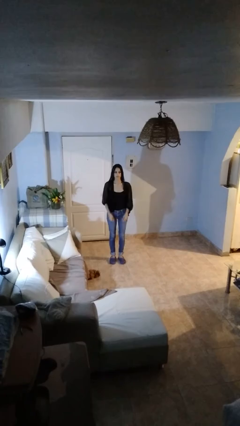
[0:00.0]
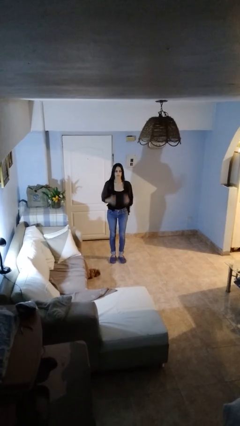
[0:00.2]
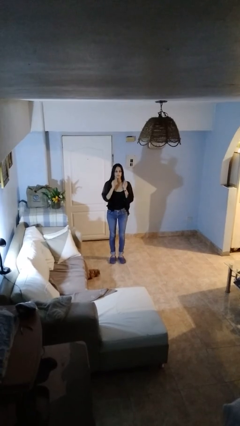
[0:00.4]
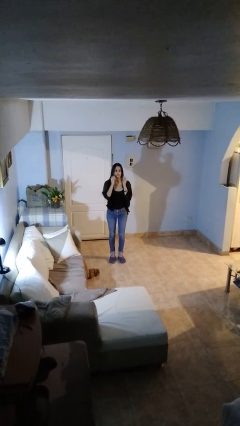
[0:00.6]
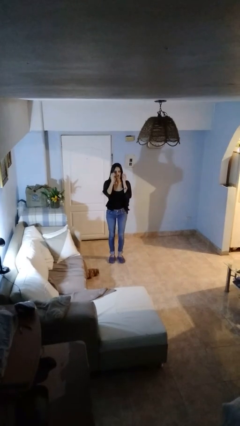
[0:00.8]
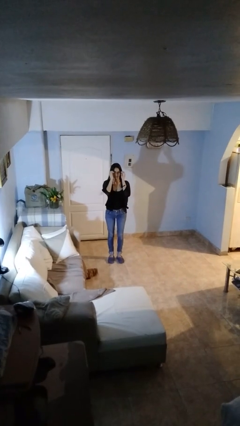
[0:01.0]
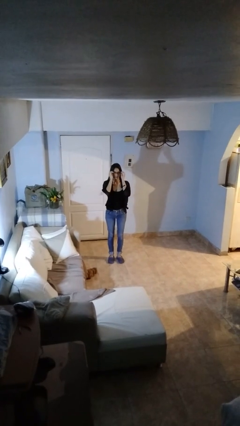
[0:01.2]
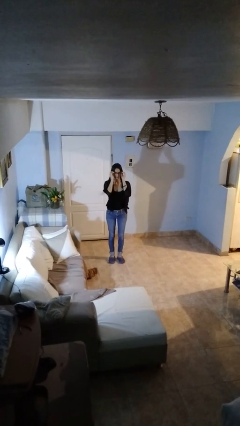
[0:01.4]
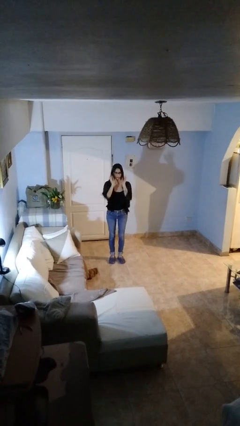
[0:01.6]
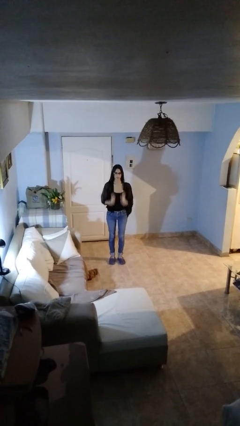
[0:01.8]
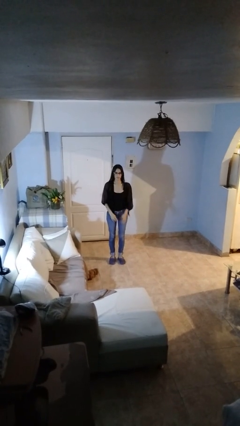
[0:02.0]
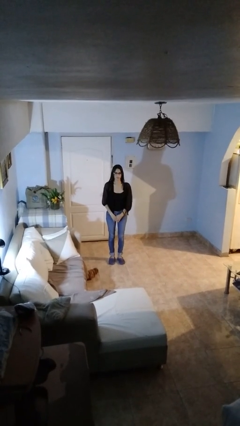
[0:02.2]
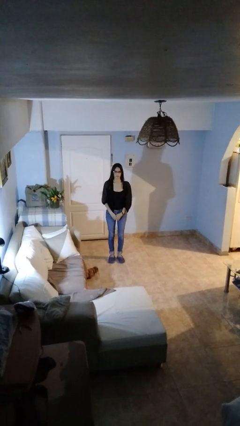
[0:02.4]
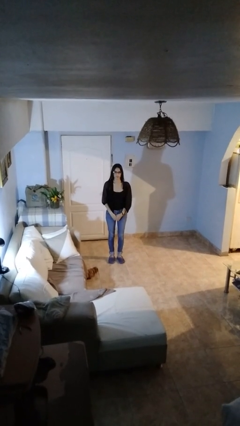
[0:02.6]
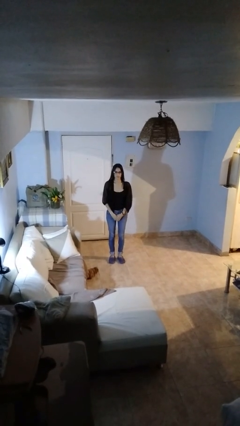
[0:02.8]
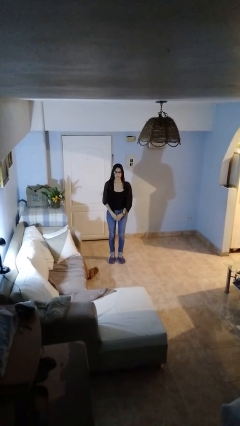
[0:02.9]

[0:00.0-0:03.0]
person puts on glasses

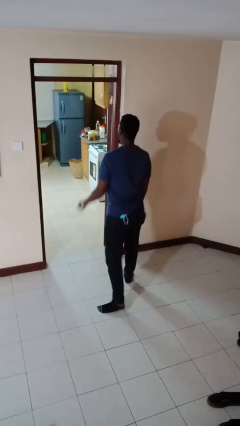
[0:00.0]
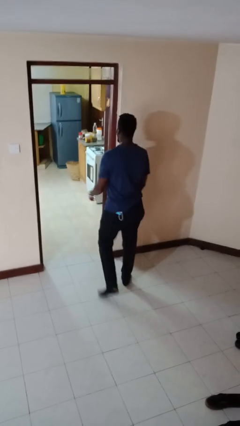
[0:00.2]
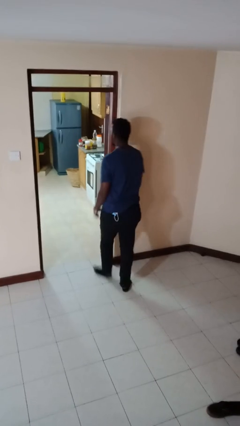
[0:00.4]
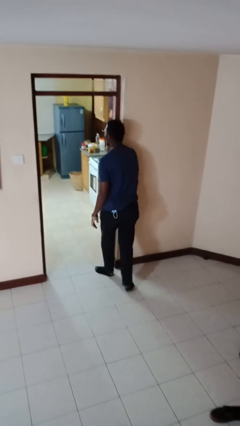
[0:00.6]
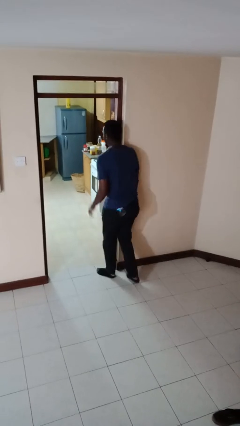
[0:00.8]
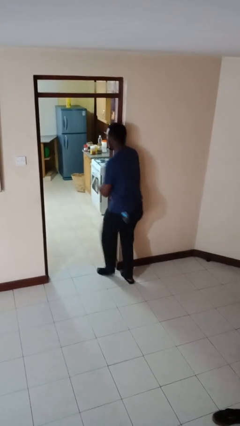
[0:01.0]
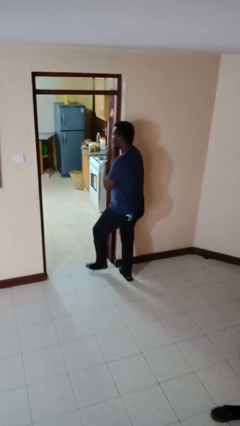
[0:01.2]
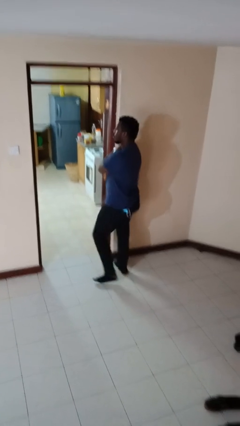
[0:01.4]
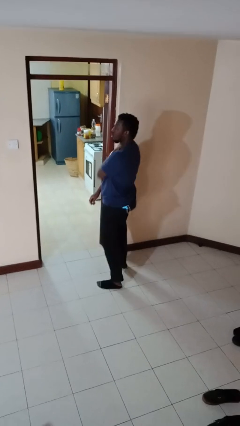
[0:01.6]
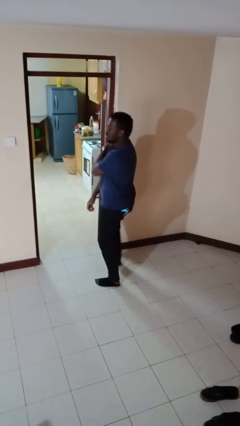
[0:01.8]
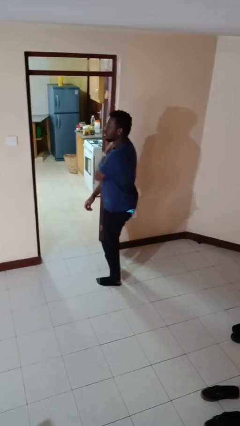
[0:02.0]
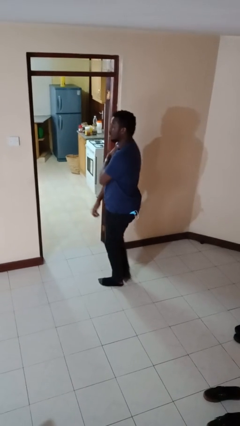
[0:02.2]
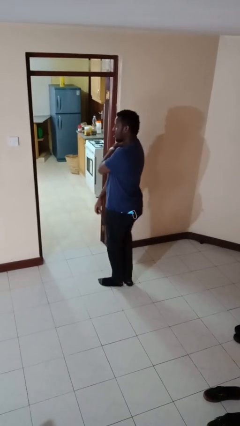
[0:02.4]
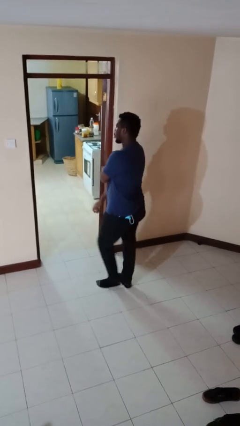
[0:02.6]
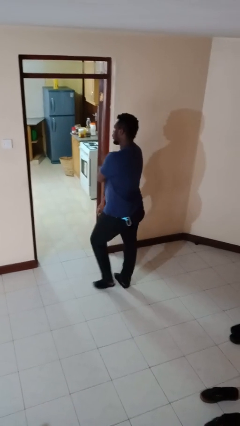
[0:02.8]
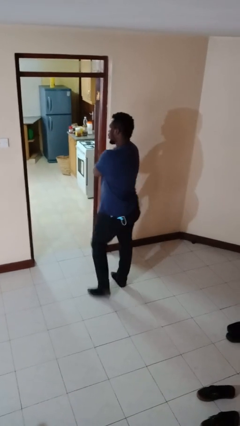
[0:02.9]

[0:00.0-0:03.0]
person bumps into wall

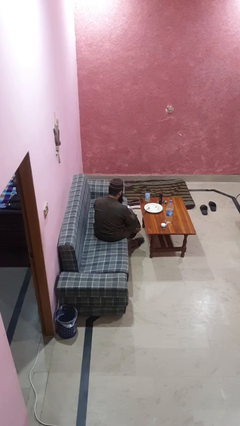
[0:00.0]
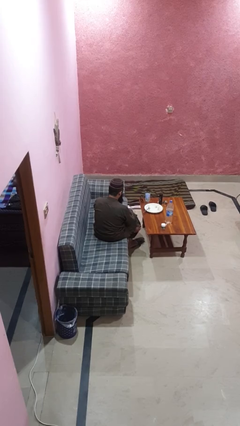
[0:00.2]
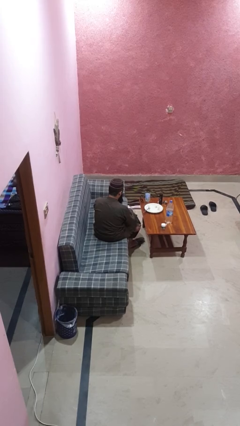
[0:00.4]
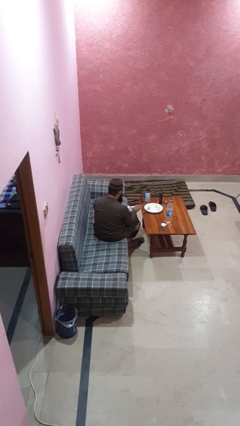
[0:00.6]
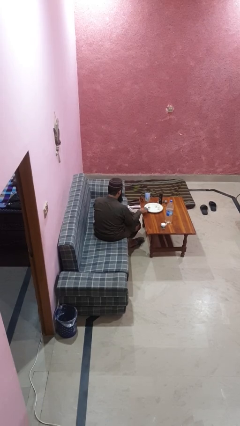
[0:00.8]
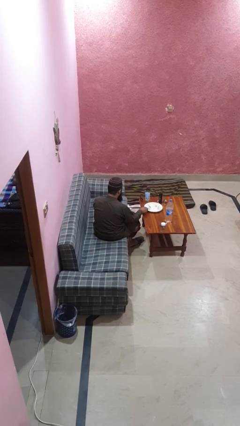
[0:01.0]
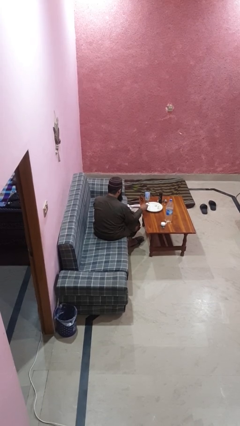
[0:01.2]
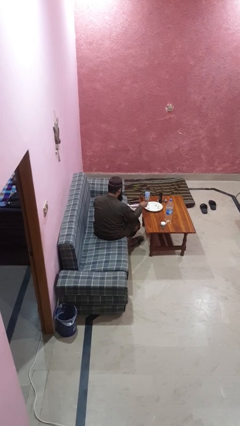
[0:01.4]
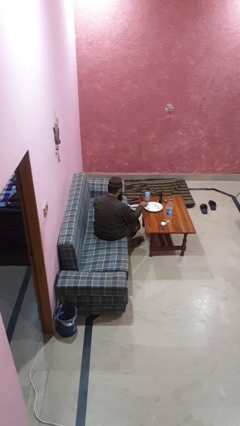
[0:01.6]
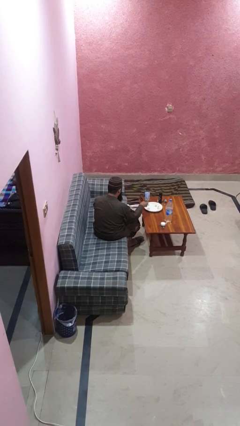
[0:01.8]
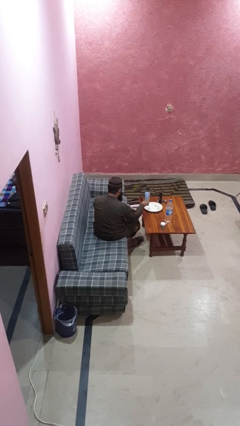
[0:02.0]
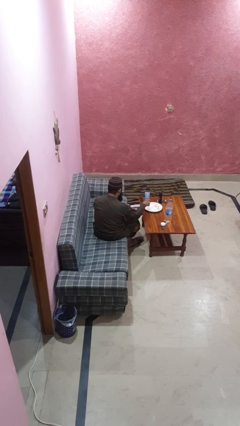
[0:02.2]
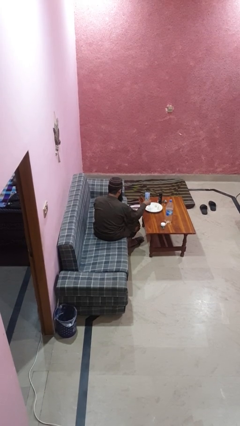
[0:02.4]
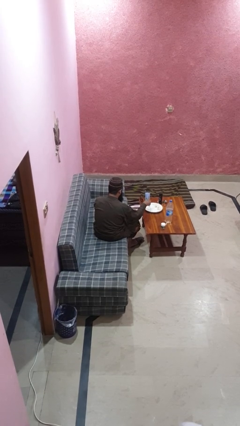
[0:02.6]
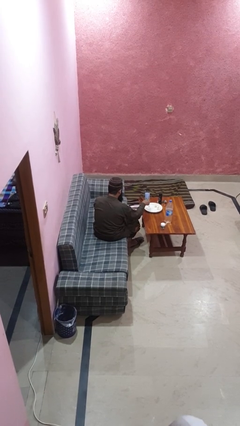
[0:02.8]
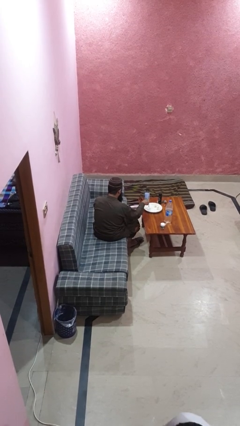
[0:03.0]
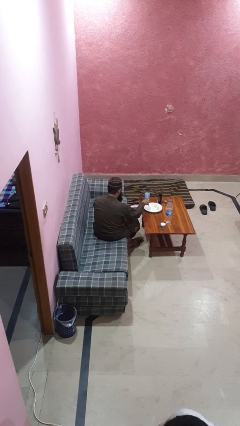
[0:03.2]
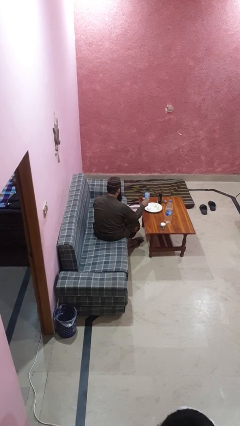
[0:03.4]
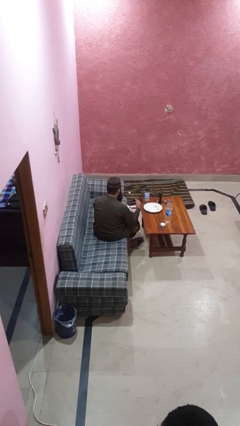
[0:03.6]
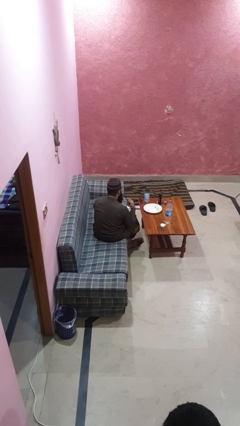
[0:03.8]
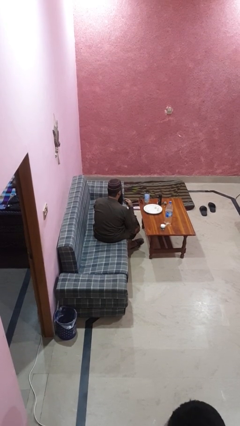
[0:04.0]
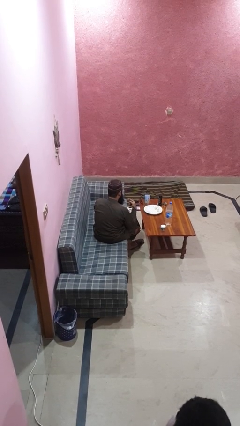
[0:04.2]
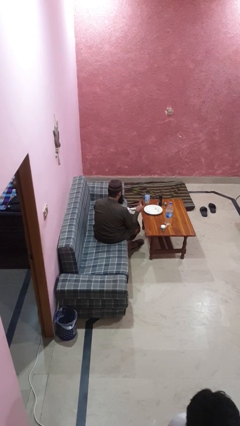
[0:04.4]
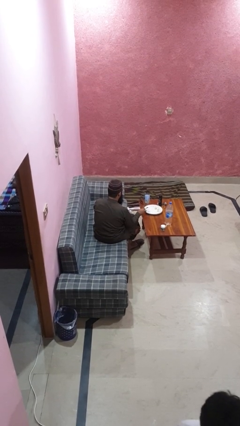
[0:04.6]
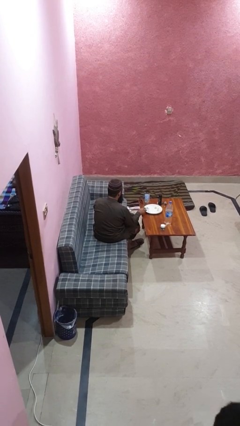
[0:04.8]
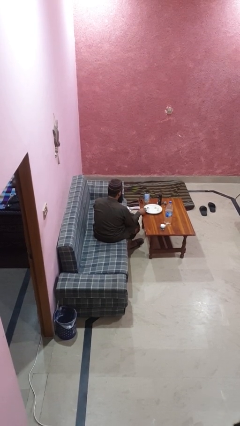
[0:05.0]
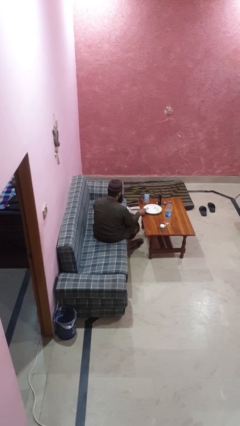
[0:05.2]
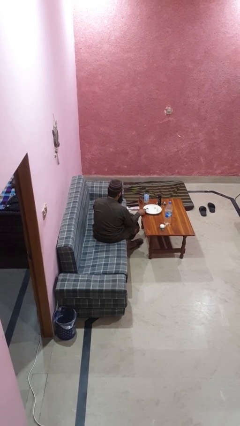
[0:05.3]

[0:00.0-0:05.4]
person eats with utensil

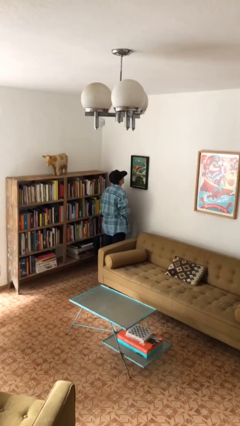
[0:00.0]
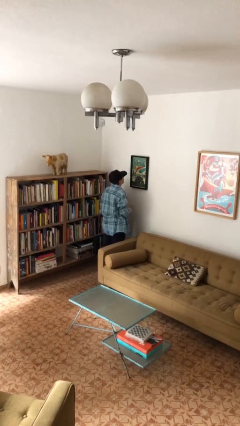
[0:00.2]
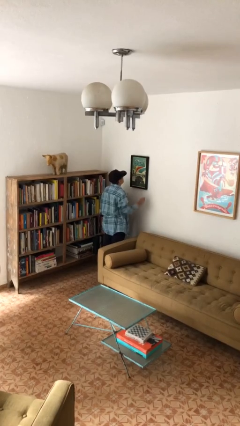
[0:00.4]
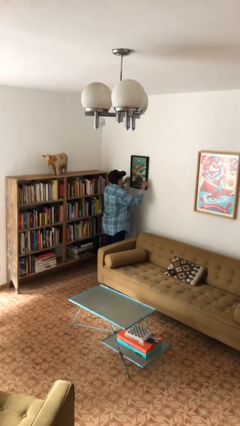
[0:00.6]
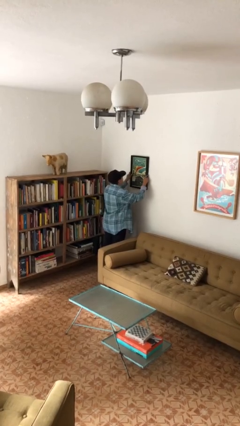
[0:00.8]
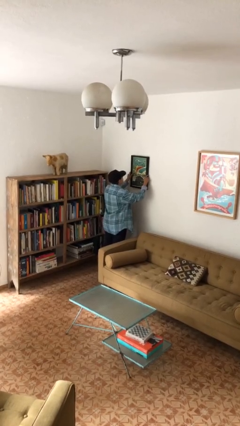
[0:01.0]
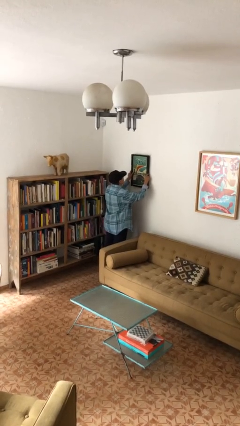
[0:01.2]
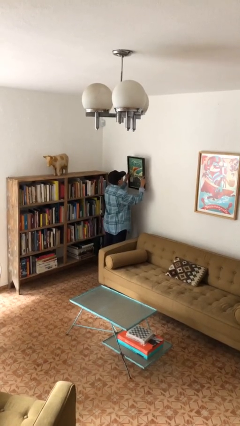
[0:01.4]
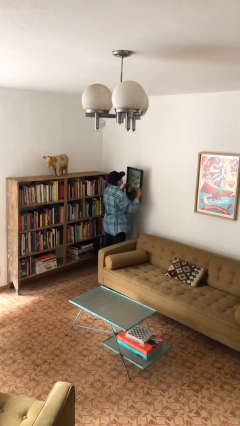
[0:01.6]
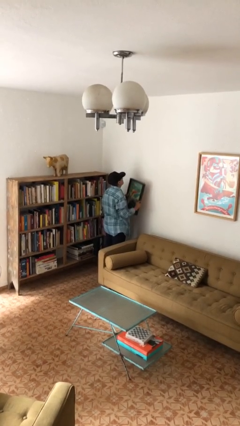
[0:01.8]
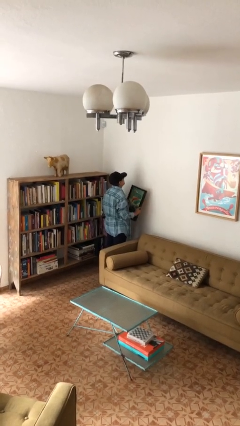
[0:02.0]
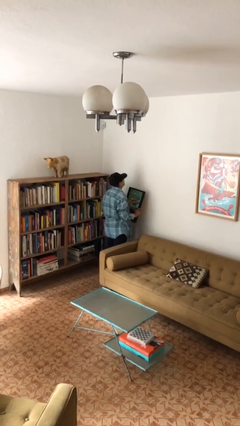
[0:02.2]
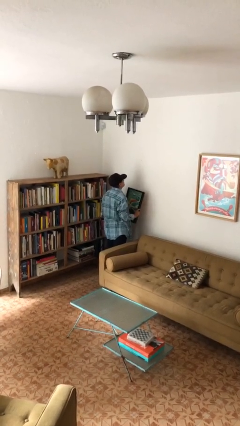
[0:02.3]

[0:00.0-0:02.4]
person takes down picture frame

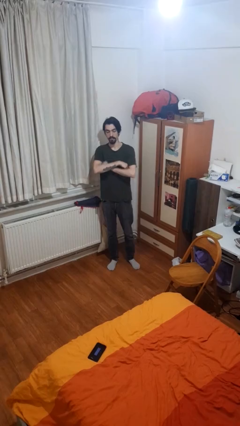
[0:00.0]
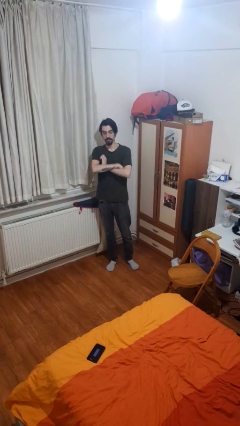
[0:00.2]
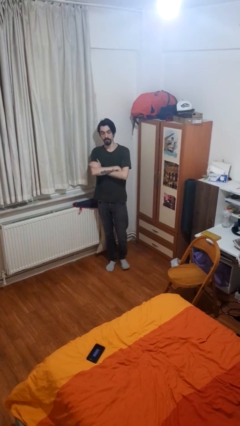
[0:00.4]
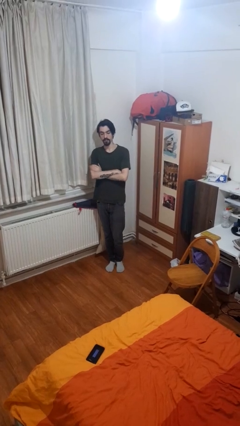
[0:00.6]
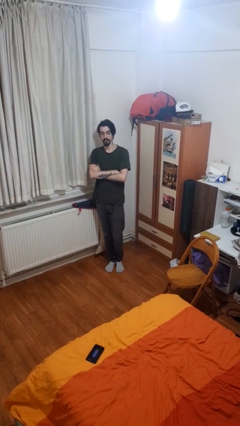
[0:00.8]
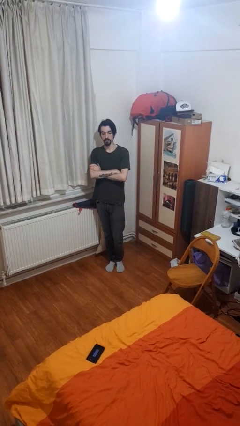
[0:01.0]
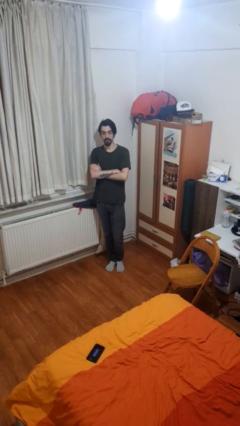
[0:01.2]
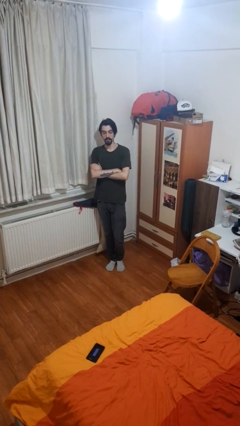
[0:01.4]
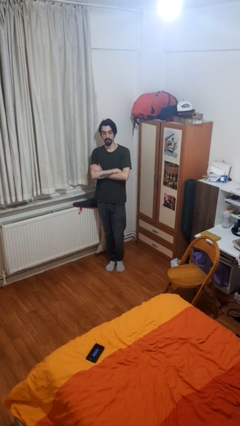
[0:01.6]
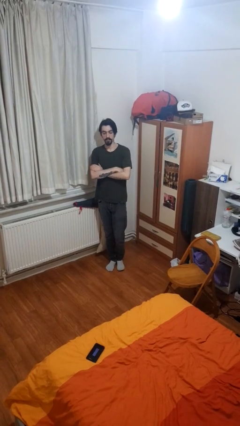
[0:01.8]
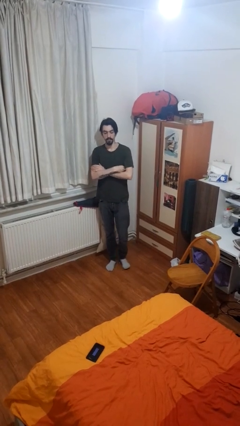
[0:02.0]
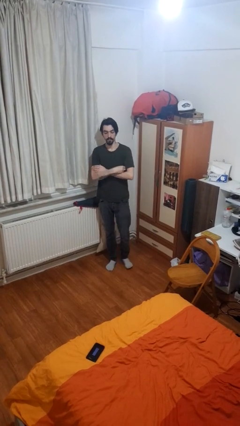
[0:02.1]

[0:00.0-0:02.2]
person crosses arms

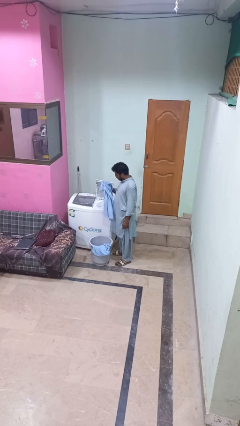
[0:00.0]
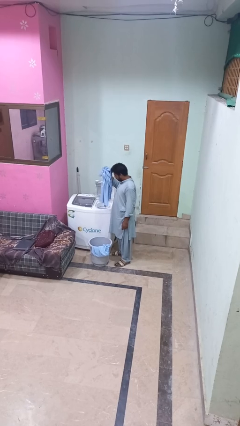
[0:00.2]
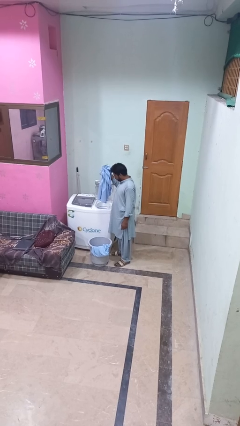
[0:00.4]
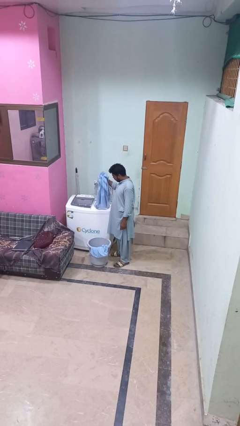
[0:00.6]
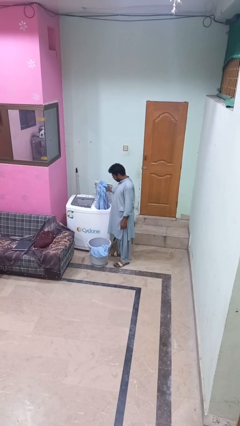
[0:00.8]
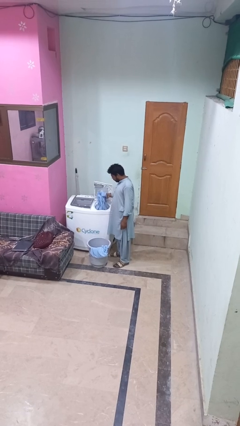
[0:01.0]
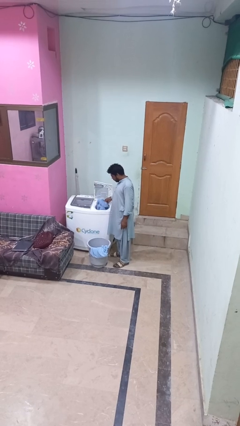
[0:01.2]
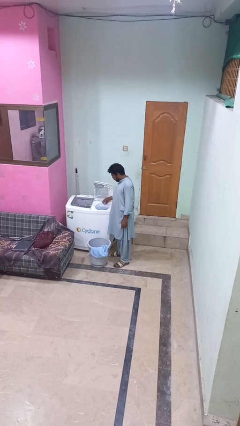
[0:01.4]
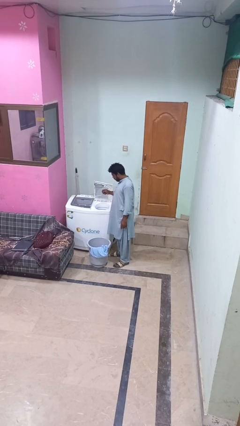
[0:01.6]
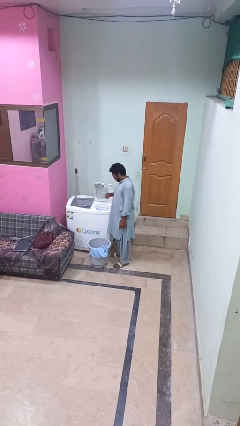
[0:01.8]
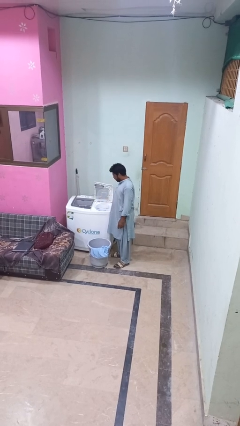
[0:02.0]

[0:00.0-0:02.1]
person loads dryer
